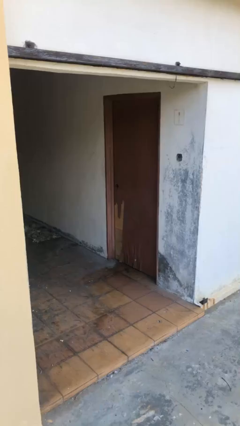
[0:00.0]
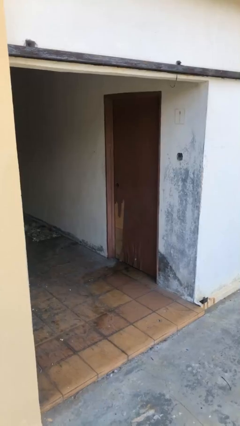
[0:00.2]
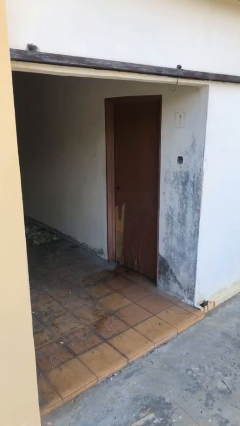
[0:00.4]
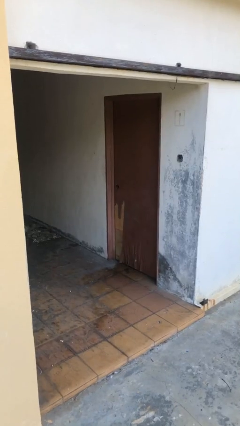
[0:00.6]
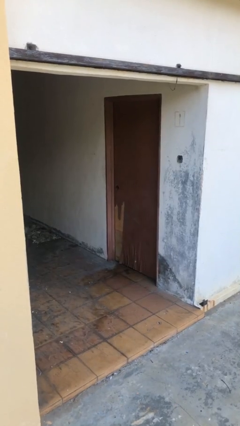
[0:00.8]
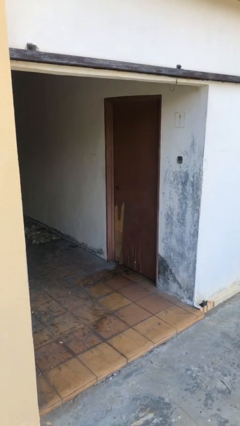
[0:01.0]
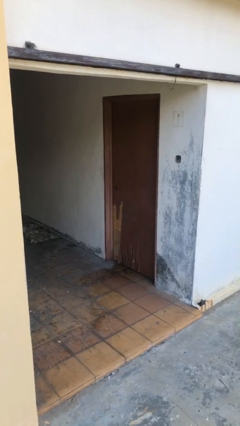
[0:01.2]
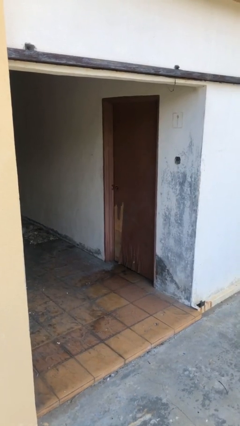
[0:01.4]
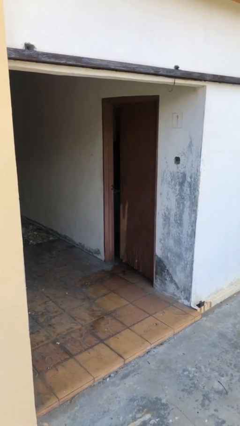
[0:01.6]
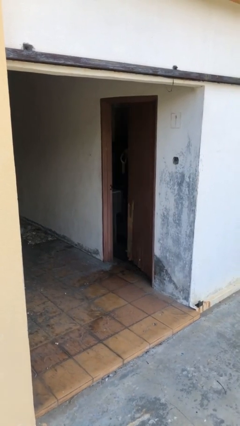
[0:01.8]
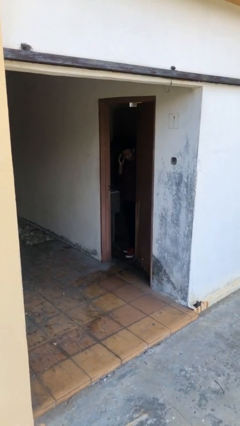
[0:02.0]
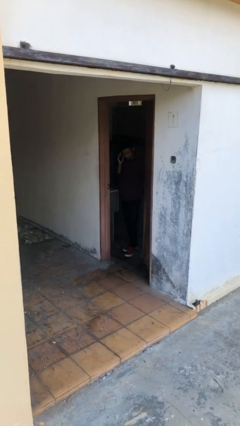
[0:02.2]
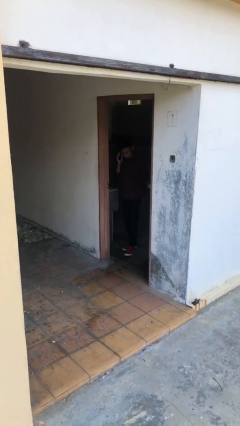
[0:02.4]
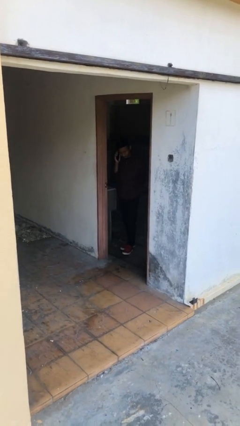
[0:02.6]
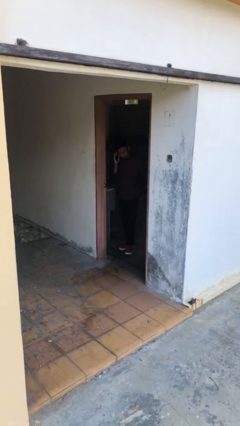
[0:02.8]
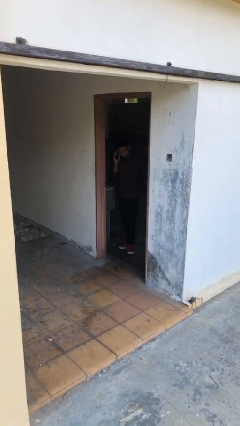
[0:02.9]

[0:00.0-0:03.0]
person opens facility door

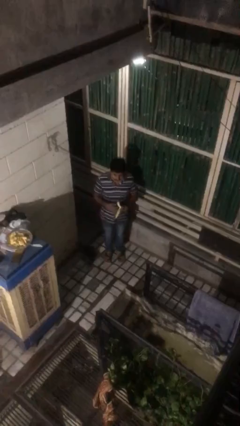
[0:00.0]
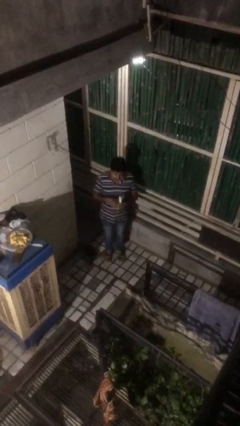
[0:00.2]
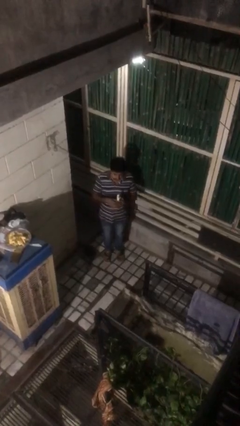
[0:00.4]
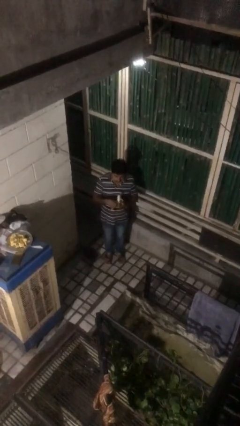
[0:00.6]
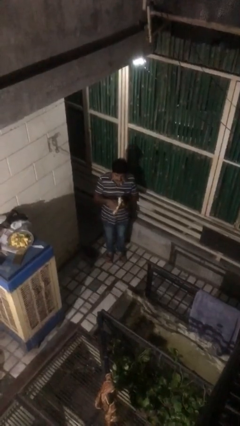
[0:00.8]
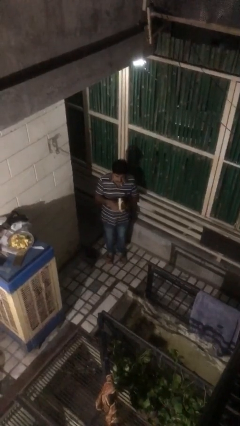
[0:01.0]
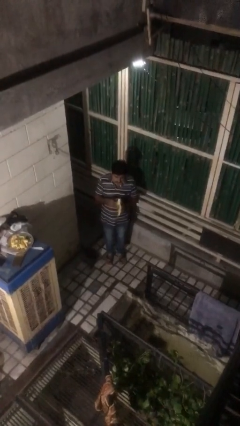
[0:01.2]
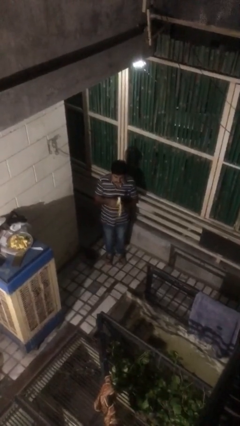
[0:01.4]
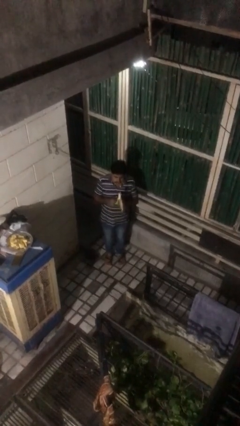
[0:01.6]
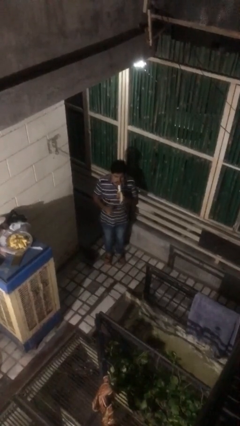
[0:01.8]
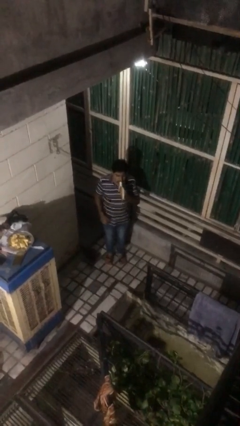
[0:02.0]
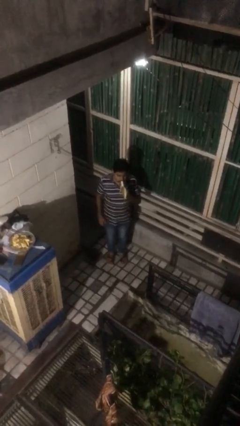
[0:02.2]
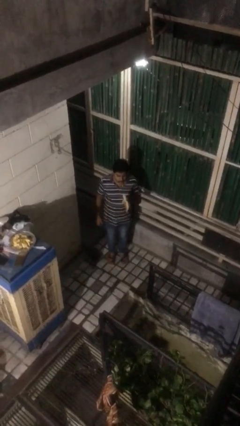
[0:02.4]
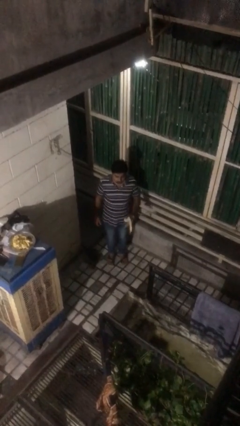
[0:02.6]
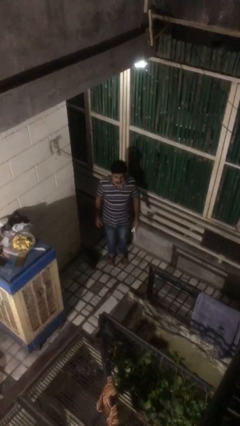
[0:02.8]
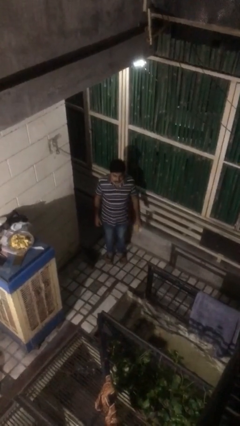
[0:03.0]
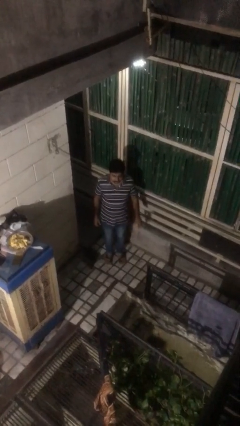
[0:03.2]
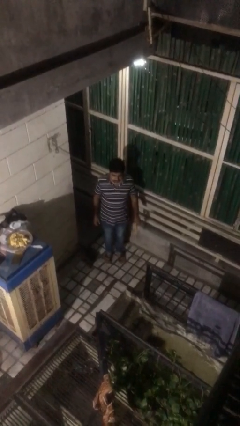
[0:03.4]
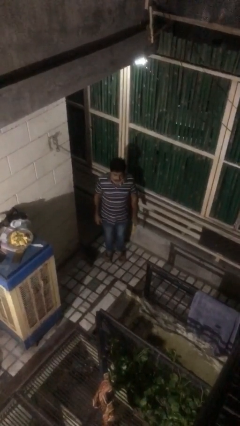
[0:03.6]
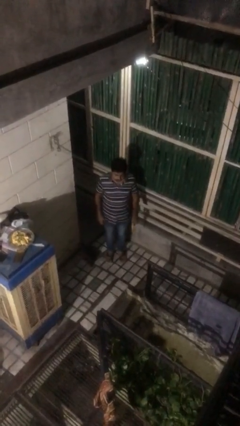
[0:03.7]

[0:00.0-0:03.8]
person eats banana

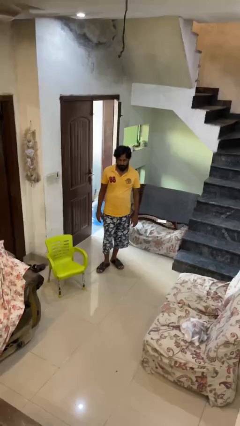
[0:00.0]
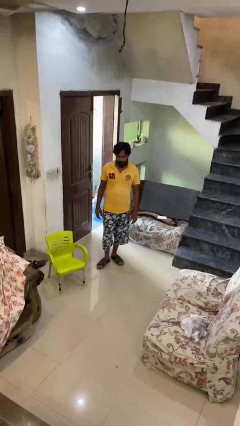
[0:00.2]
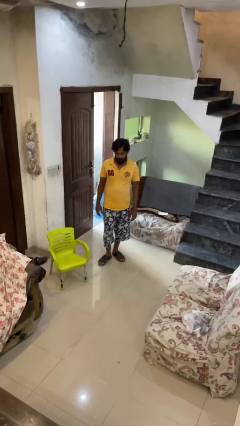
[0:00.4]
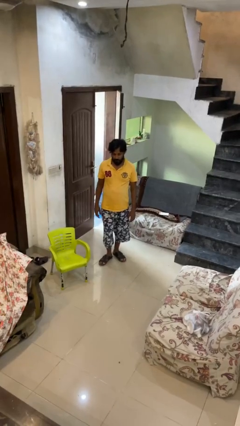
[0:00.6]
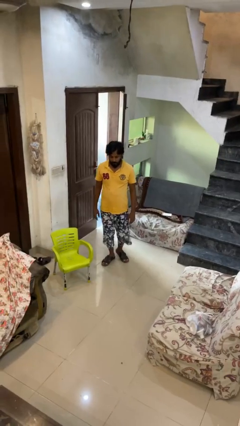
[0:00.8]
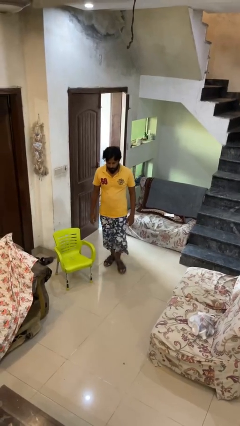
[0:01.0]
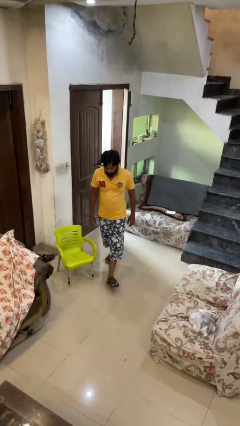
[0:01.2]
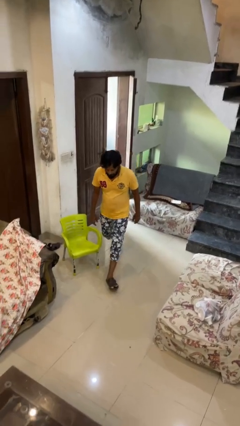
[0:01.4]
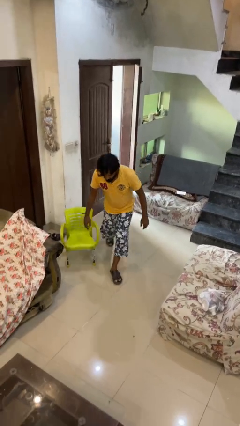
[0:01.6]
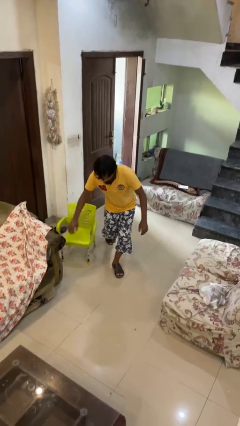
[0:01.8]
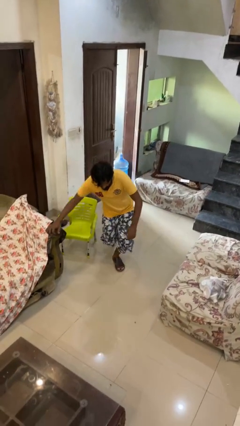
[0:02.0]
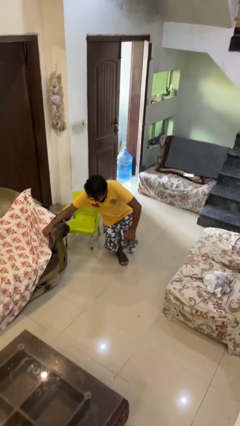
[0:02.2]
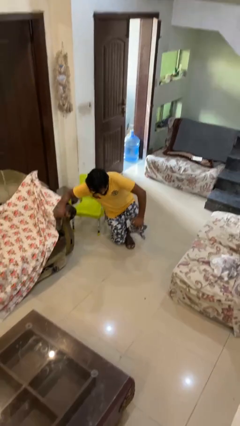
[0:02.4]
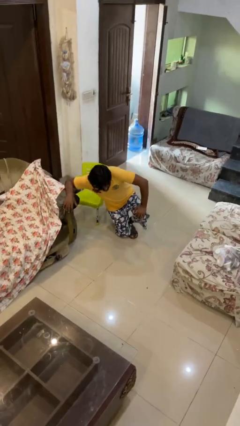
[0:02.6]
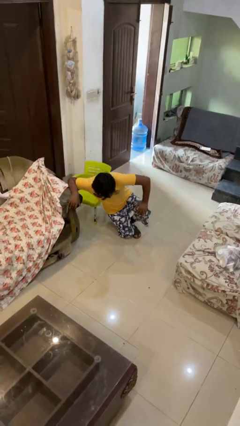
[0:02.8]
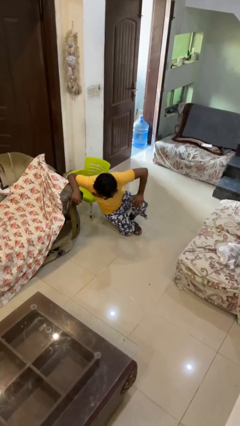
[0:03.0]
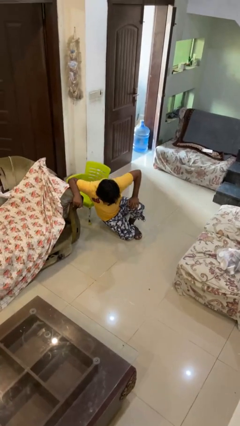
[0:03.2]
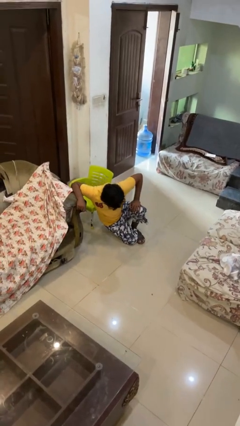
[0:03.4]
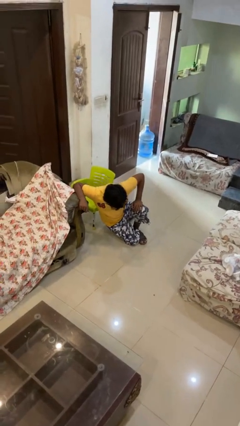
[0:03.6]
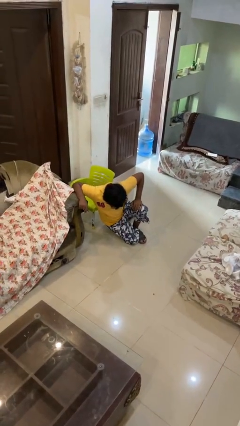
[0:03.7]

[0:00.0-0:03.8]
person trips on object on floor

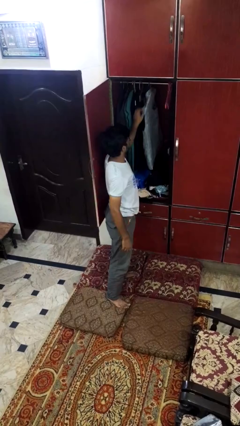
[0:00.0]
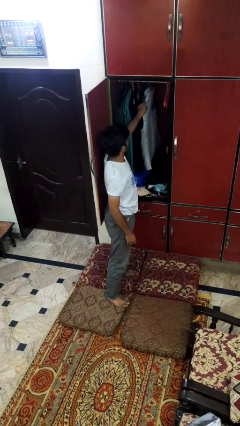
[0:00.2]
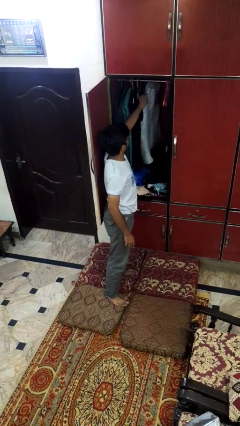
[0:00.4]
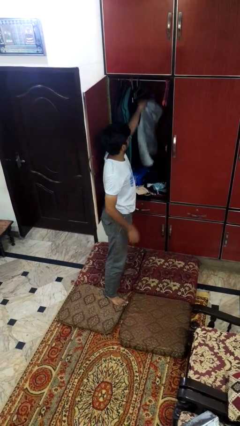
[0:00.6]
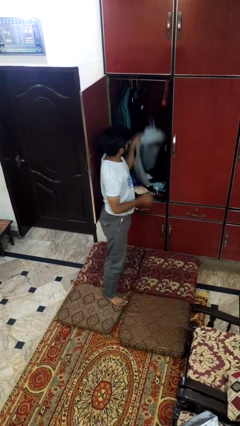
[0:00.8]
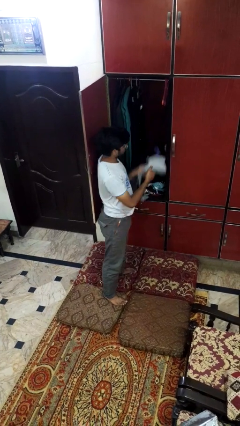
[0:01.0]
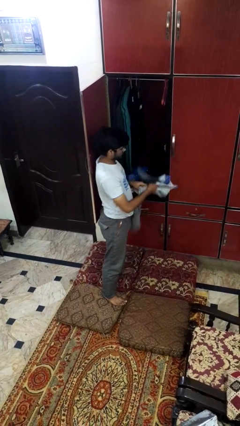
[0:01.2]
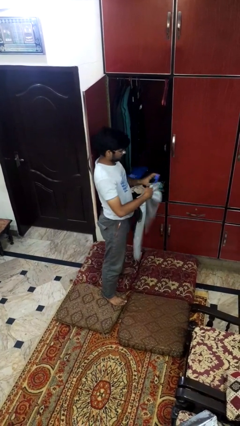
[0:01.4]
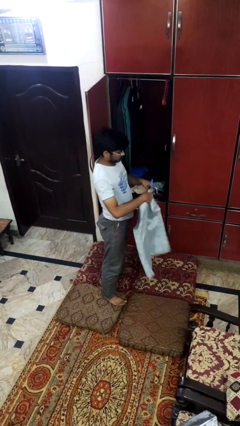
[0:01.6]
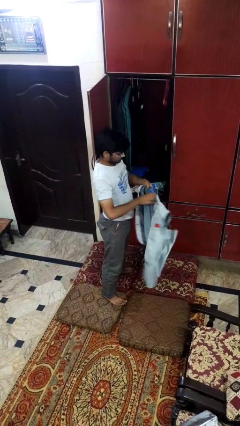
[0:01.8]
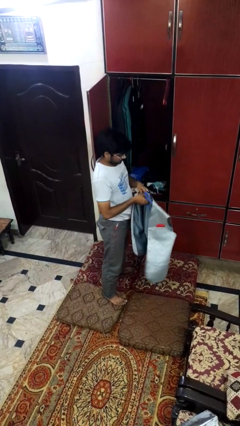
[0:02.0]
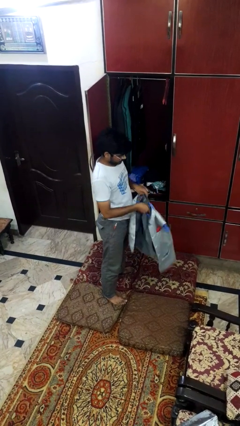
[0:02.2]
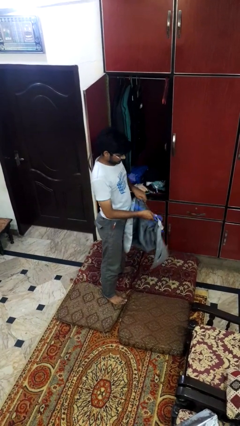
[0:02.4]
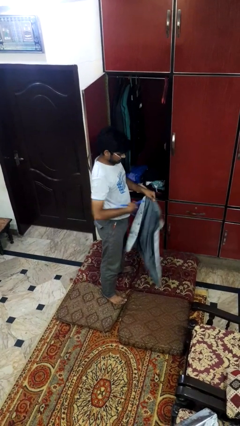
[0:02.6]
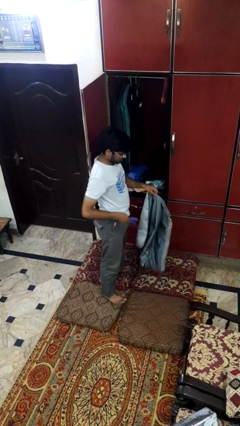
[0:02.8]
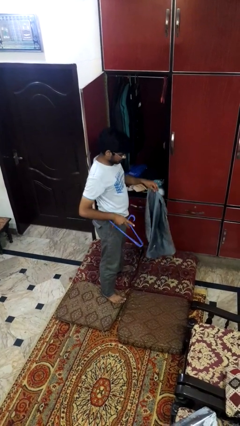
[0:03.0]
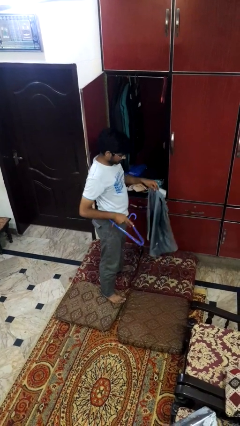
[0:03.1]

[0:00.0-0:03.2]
person takes clothes from closet

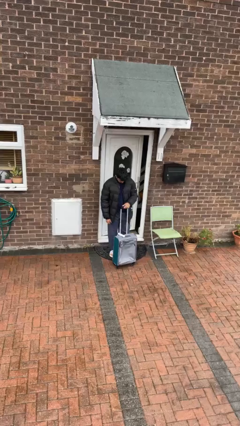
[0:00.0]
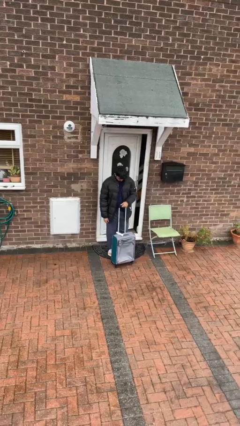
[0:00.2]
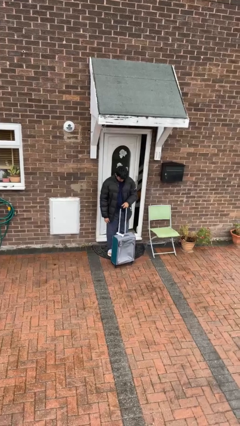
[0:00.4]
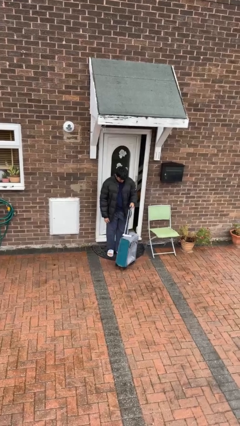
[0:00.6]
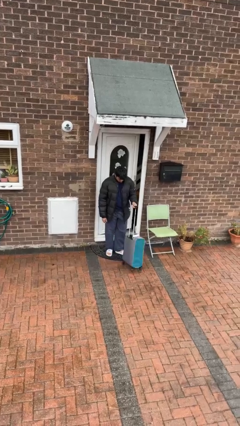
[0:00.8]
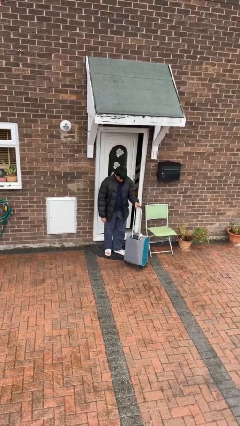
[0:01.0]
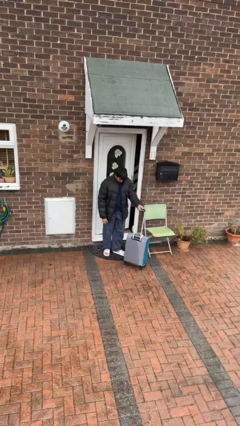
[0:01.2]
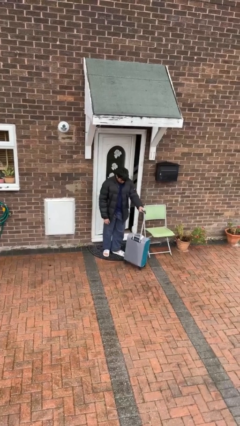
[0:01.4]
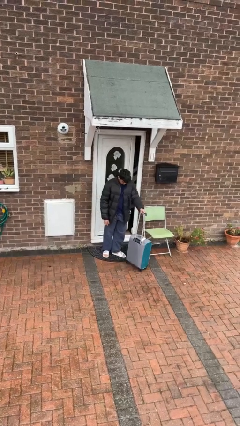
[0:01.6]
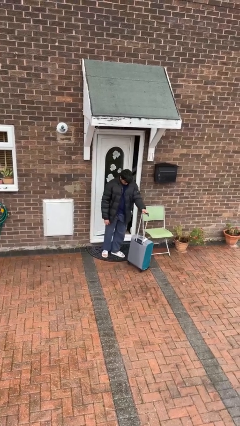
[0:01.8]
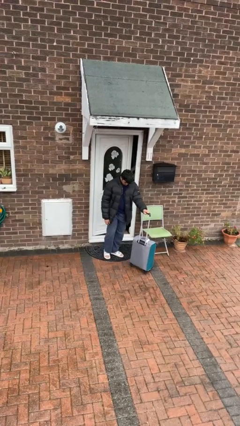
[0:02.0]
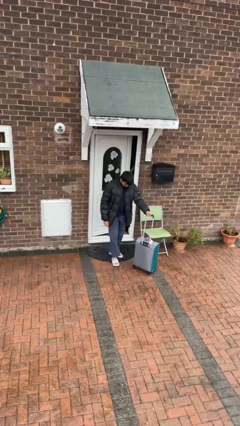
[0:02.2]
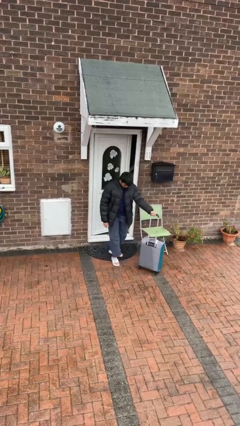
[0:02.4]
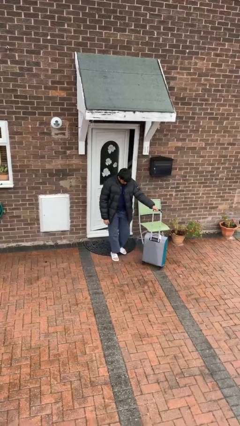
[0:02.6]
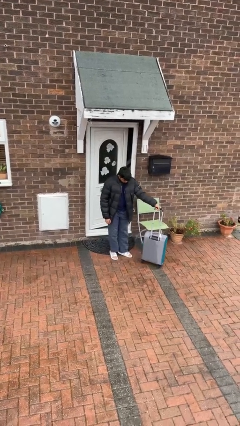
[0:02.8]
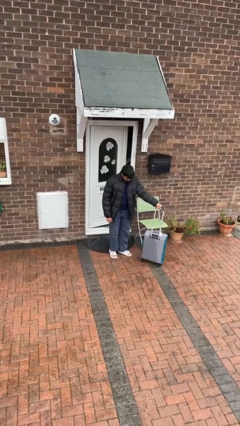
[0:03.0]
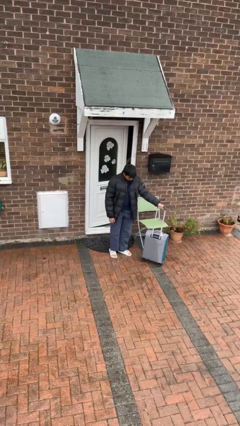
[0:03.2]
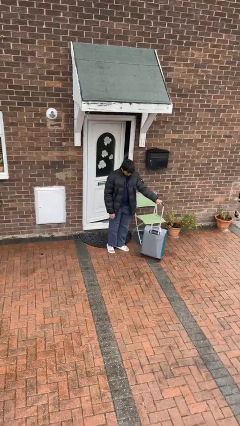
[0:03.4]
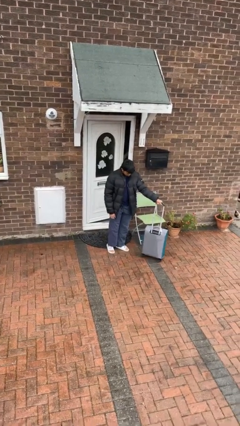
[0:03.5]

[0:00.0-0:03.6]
person pushes wheeled cart
